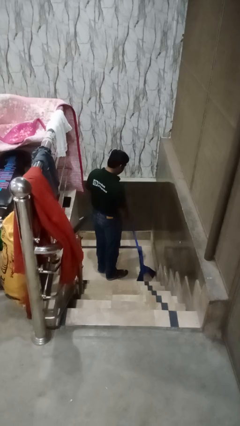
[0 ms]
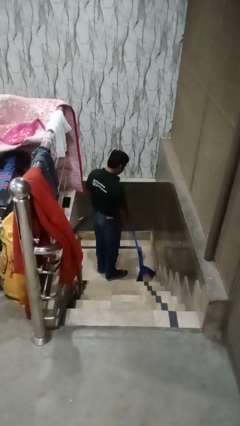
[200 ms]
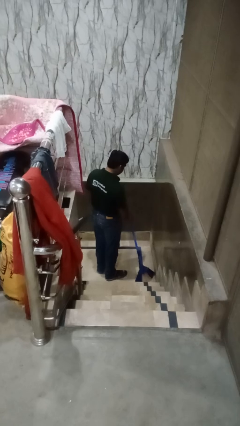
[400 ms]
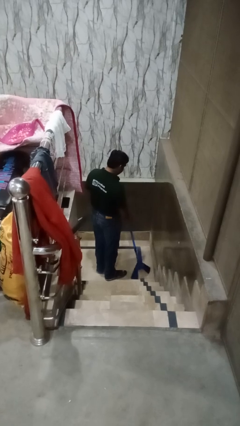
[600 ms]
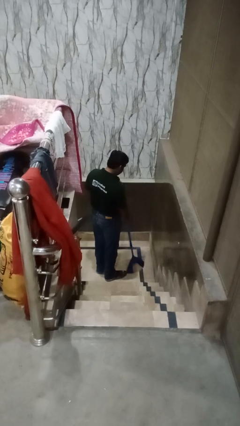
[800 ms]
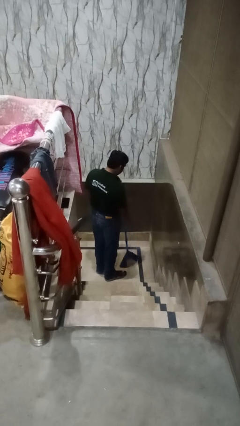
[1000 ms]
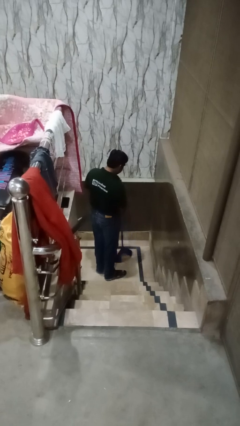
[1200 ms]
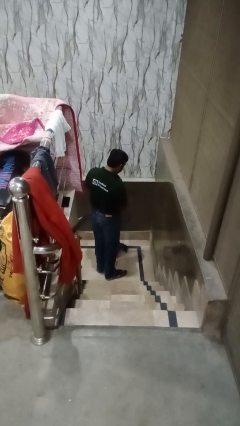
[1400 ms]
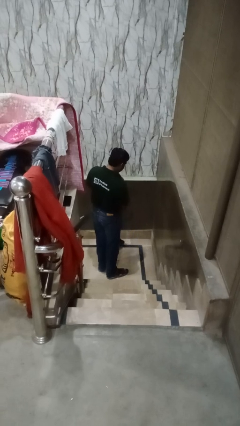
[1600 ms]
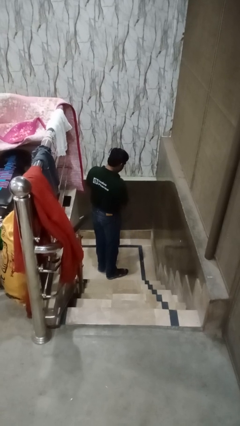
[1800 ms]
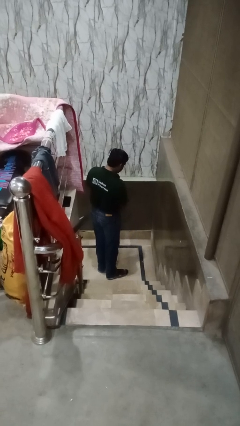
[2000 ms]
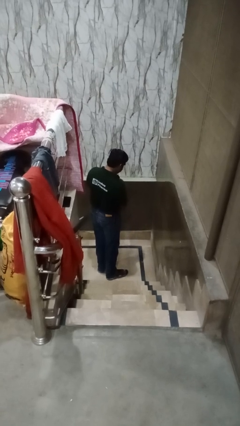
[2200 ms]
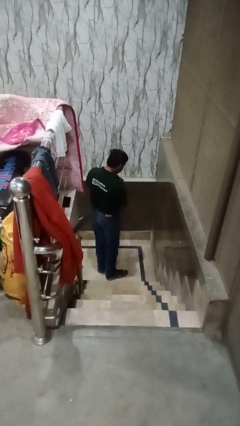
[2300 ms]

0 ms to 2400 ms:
person sweeps floor

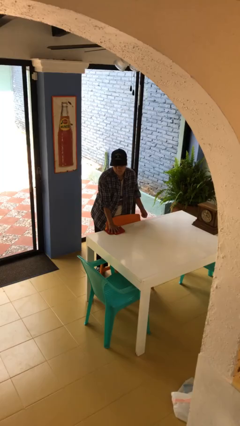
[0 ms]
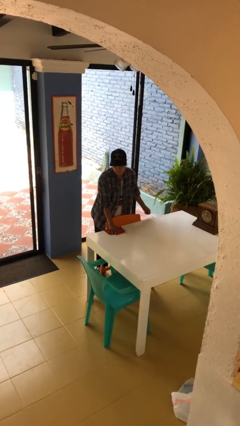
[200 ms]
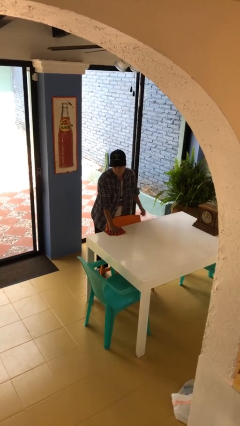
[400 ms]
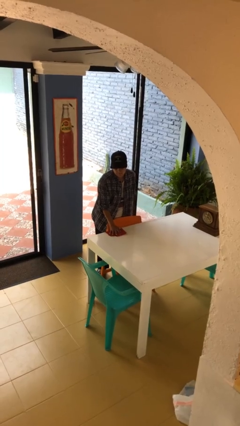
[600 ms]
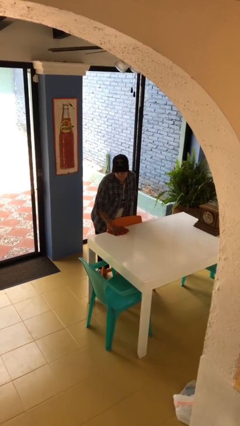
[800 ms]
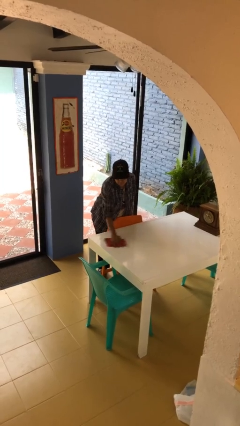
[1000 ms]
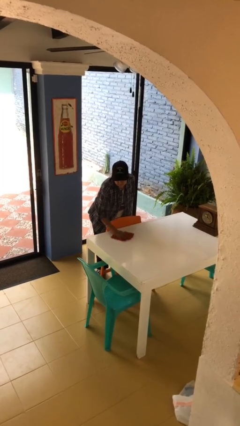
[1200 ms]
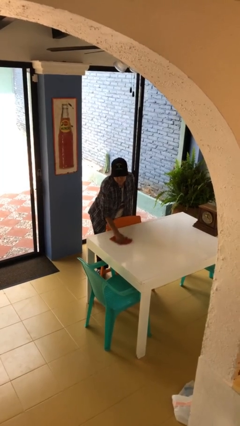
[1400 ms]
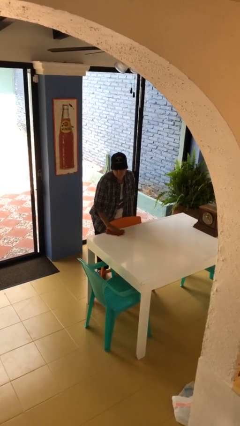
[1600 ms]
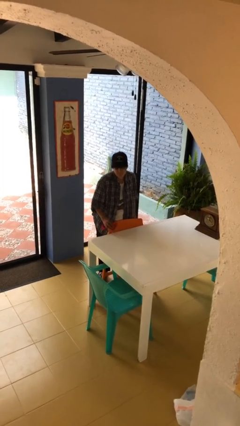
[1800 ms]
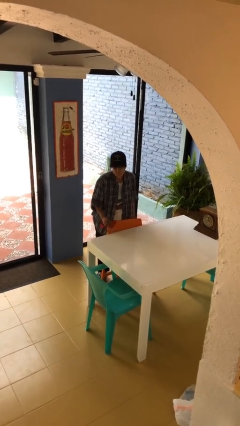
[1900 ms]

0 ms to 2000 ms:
person cleans table with rag

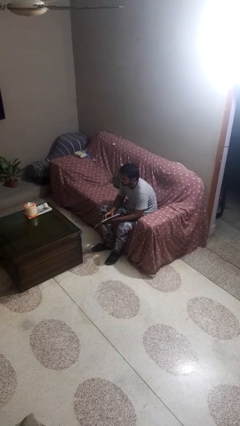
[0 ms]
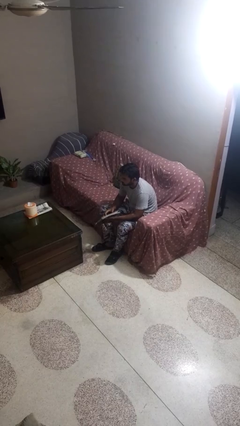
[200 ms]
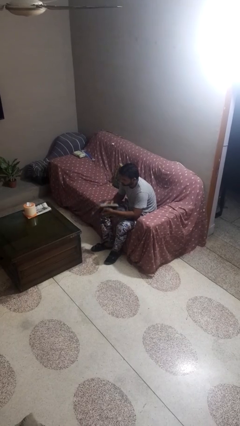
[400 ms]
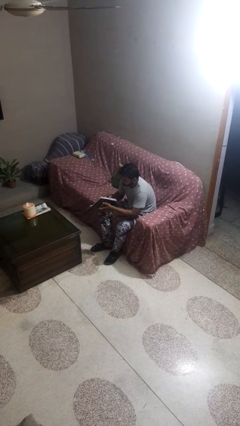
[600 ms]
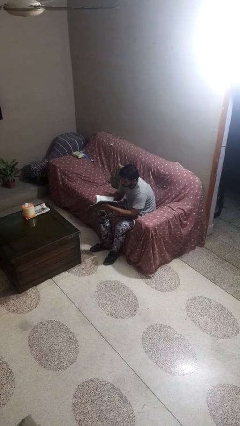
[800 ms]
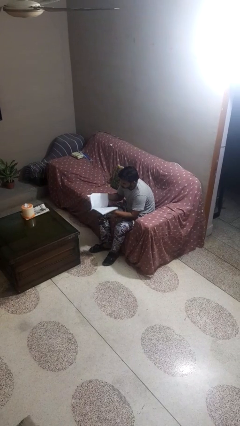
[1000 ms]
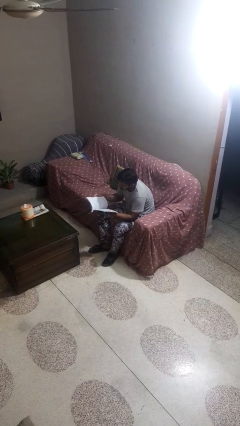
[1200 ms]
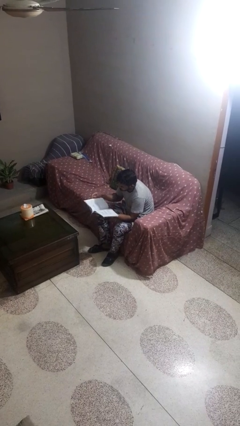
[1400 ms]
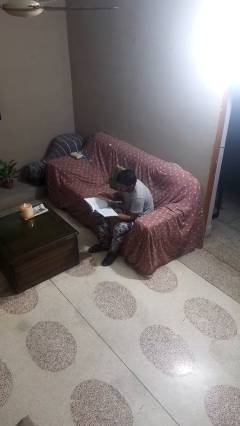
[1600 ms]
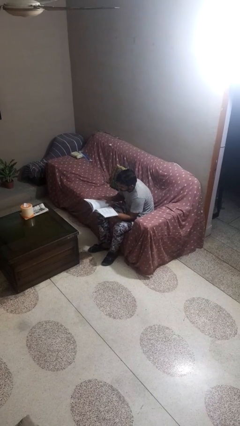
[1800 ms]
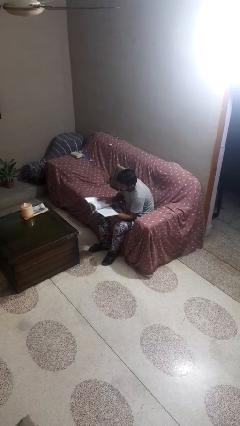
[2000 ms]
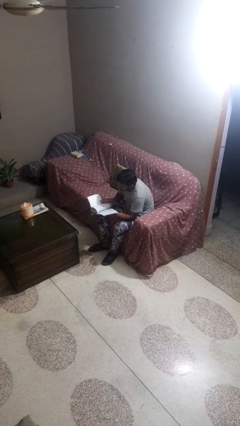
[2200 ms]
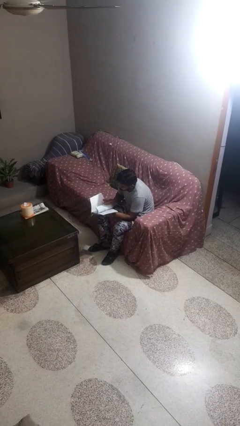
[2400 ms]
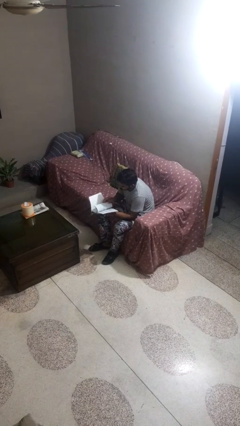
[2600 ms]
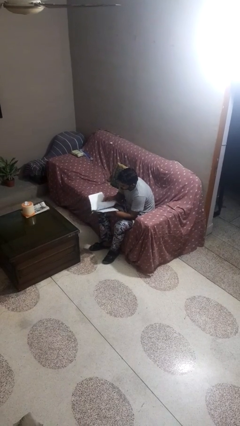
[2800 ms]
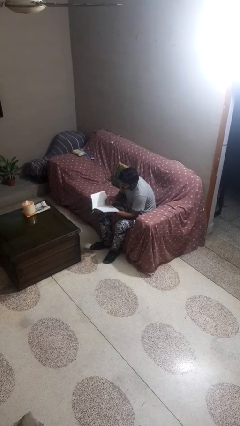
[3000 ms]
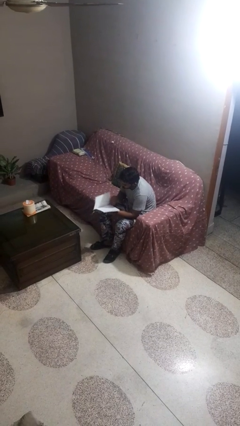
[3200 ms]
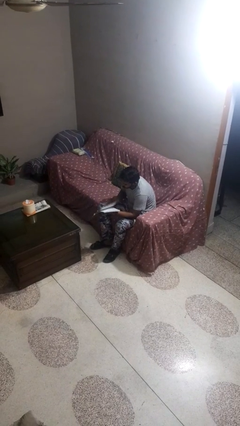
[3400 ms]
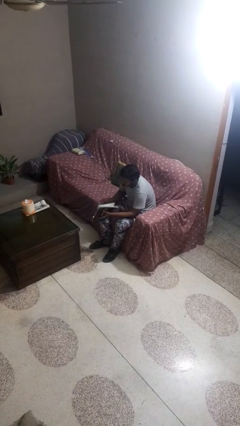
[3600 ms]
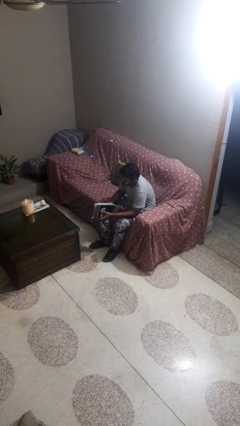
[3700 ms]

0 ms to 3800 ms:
person reads book

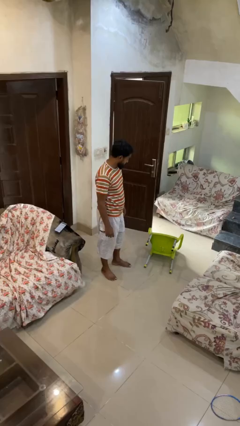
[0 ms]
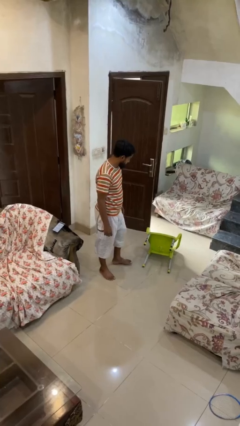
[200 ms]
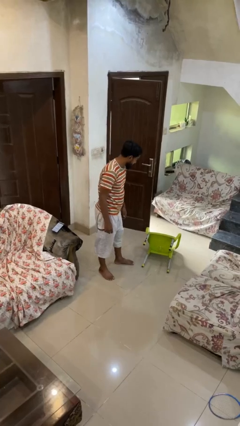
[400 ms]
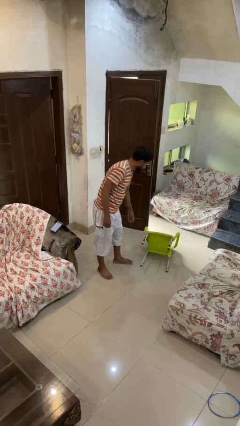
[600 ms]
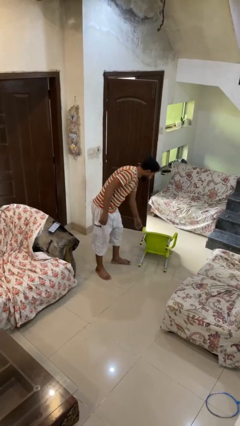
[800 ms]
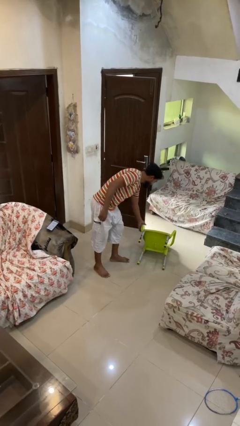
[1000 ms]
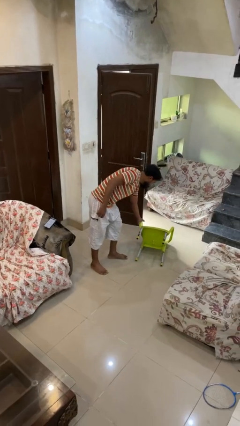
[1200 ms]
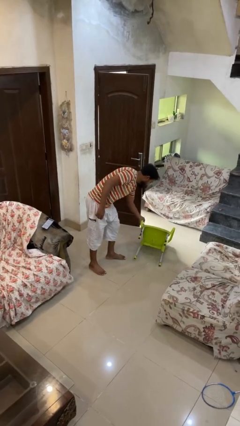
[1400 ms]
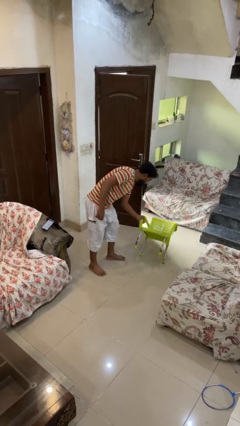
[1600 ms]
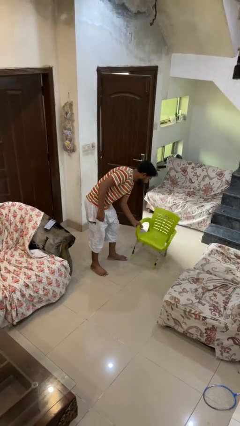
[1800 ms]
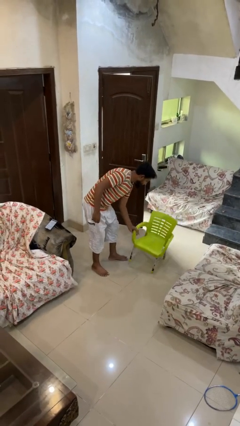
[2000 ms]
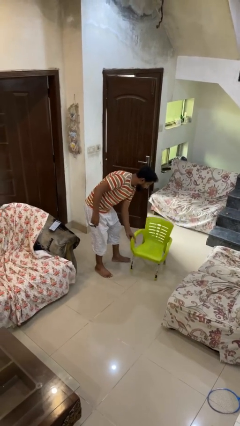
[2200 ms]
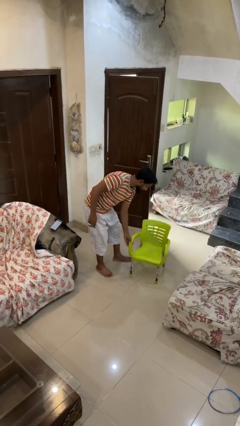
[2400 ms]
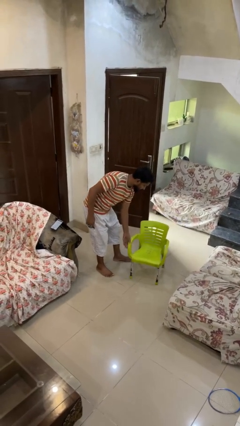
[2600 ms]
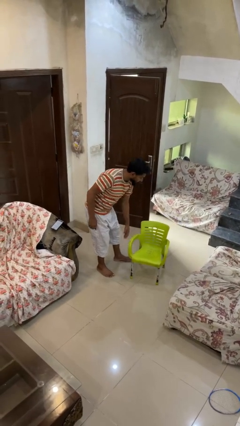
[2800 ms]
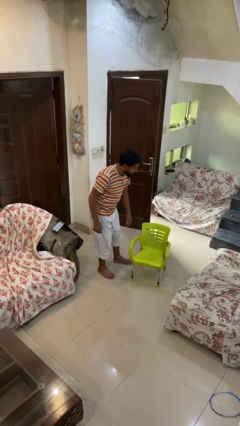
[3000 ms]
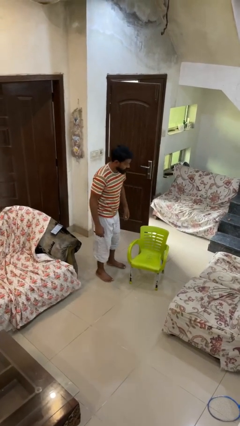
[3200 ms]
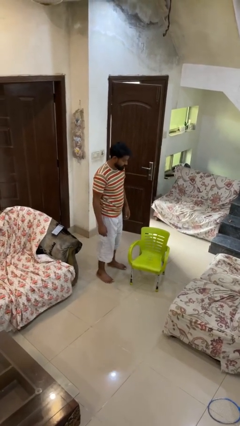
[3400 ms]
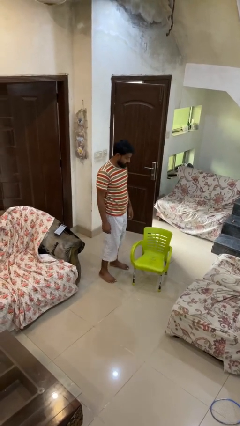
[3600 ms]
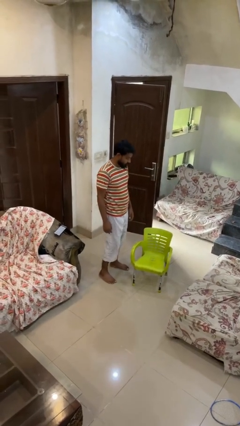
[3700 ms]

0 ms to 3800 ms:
person sets upright furniture

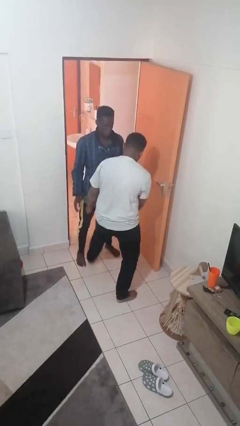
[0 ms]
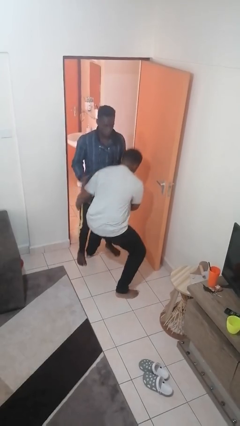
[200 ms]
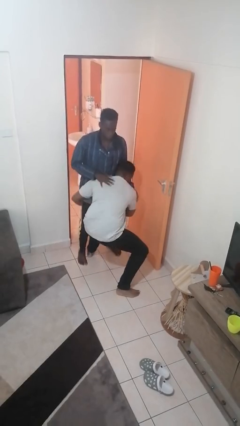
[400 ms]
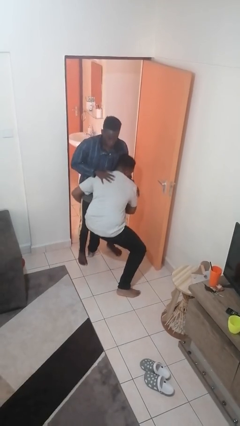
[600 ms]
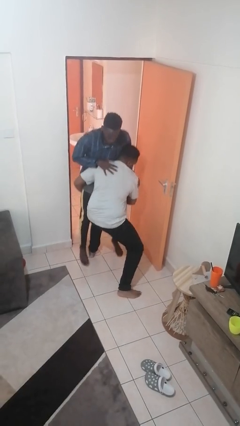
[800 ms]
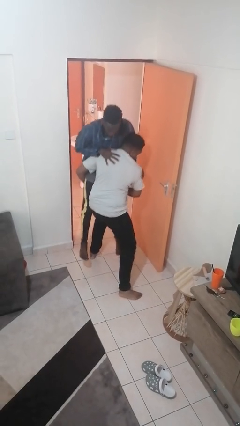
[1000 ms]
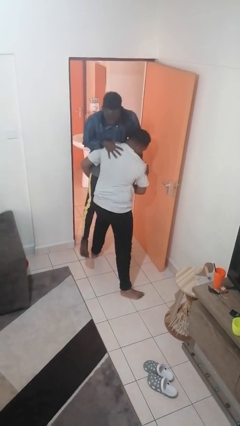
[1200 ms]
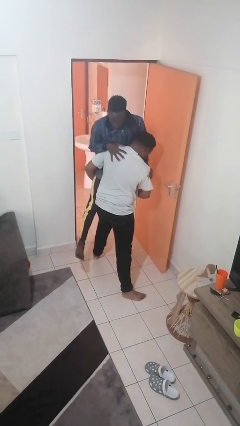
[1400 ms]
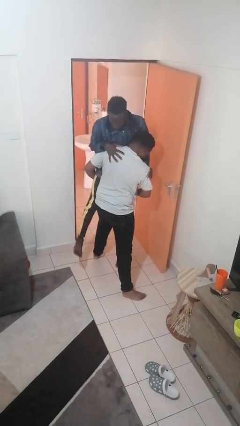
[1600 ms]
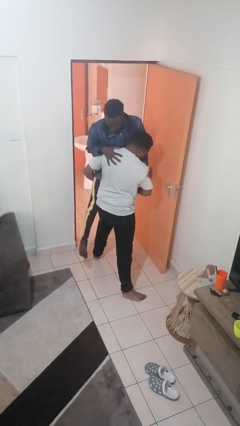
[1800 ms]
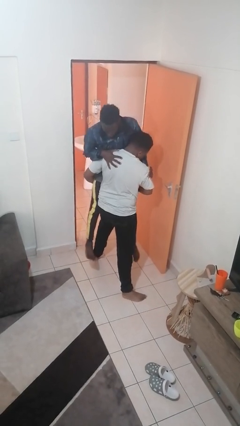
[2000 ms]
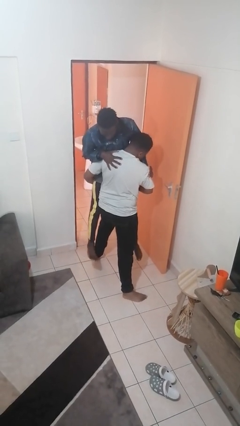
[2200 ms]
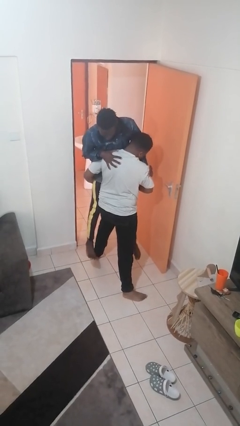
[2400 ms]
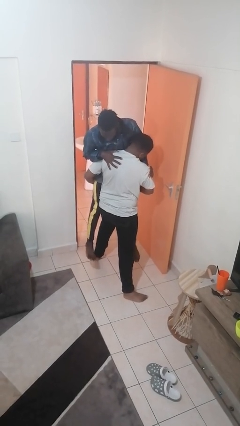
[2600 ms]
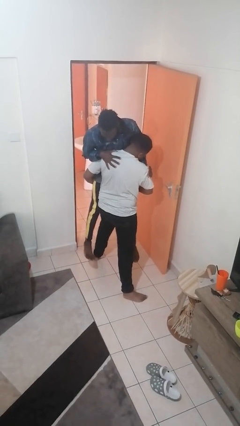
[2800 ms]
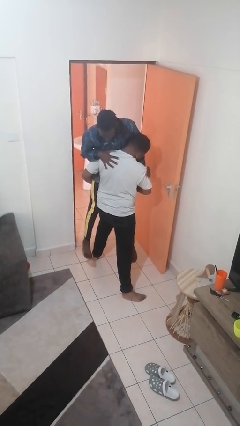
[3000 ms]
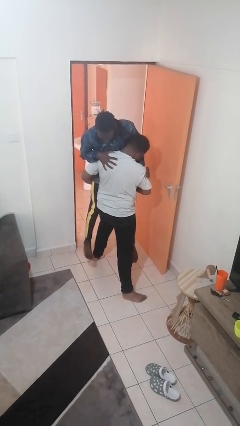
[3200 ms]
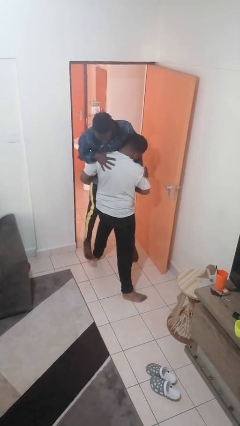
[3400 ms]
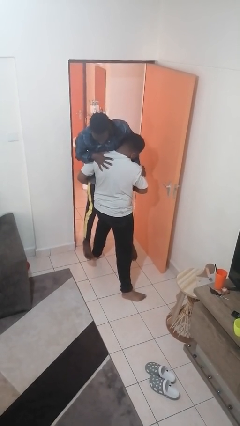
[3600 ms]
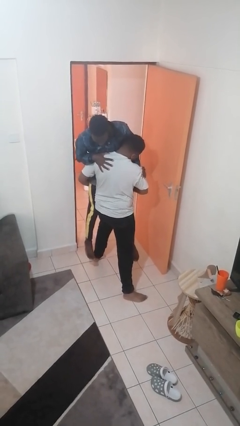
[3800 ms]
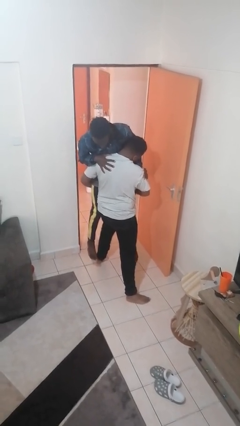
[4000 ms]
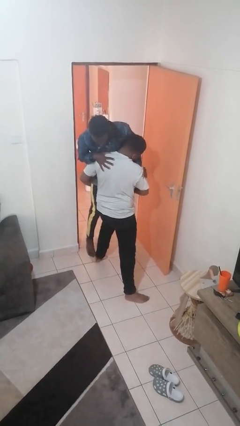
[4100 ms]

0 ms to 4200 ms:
person picks up person

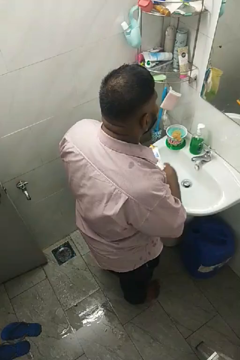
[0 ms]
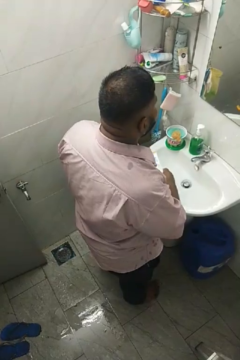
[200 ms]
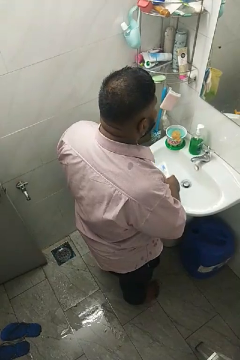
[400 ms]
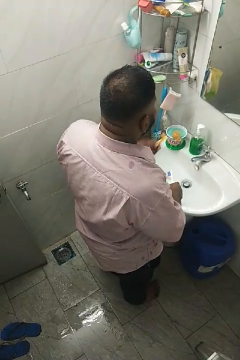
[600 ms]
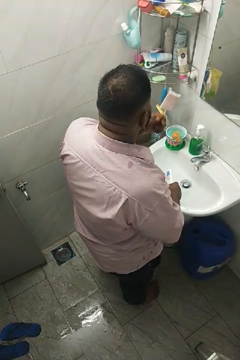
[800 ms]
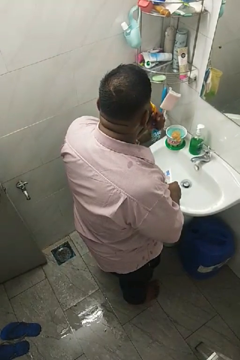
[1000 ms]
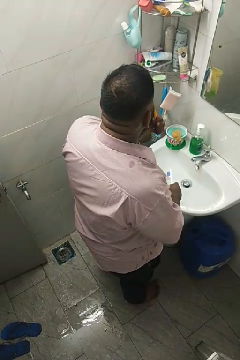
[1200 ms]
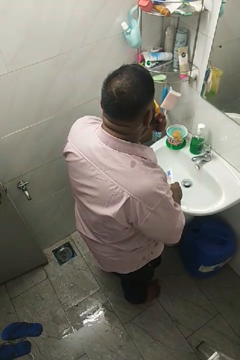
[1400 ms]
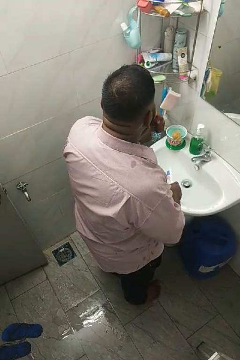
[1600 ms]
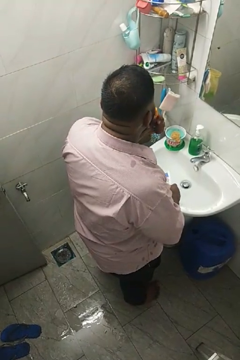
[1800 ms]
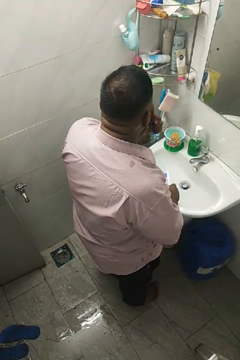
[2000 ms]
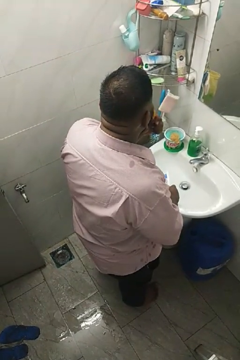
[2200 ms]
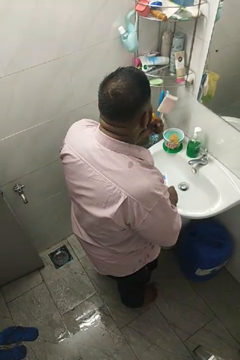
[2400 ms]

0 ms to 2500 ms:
person shaves face
